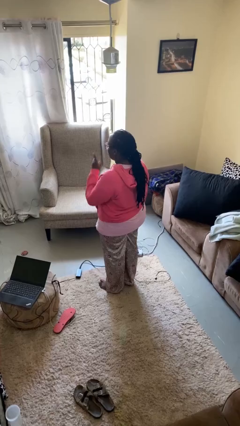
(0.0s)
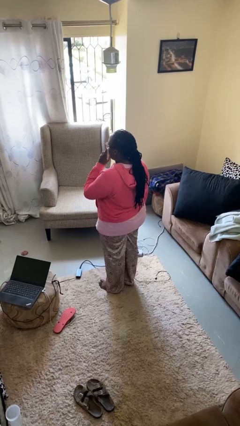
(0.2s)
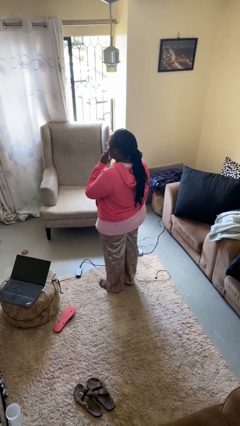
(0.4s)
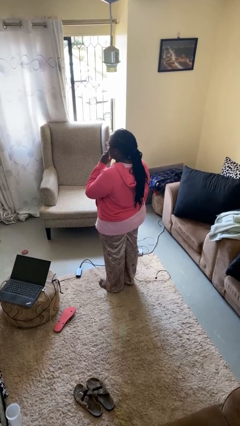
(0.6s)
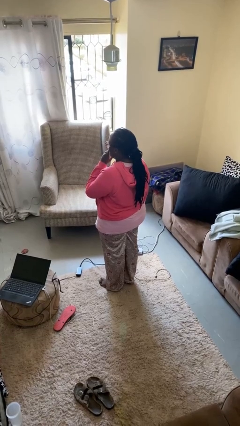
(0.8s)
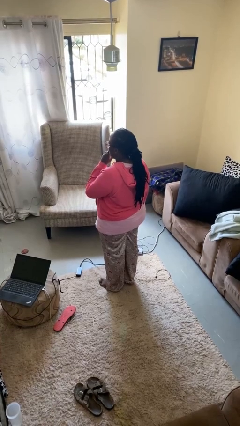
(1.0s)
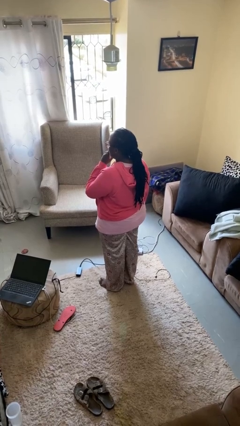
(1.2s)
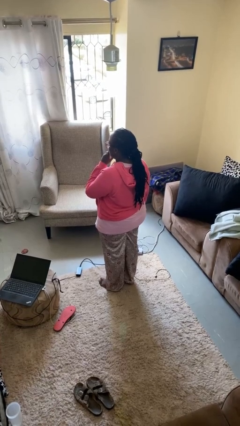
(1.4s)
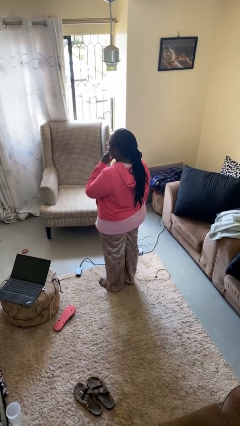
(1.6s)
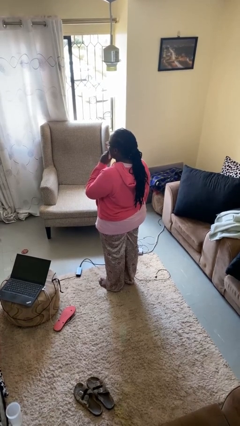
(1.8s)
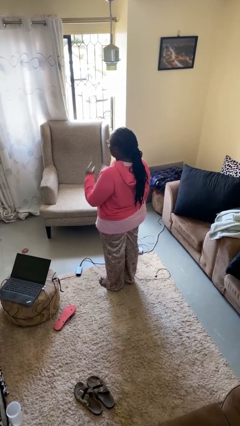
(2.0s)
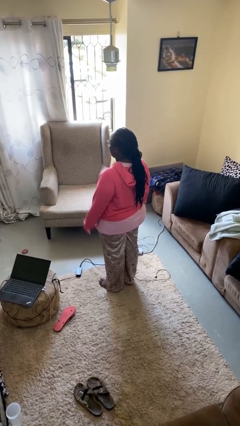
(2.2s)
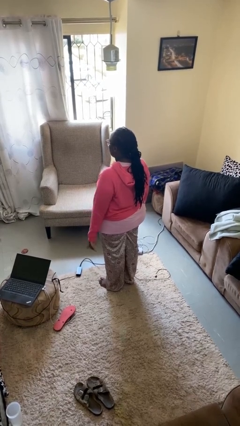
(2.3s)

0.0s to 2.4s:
person gestures be quiet

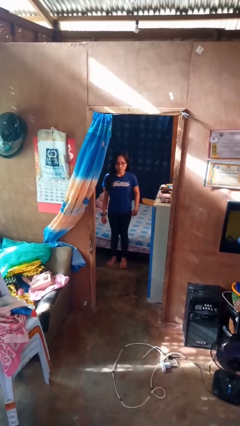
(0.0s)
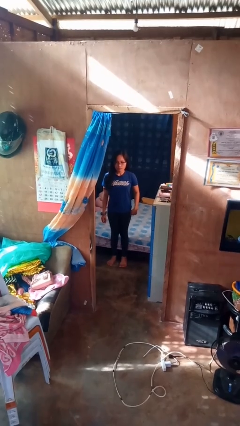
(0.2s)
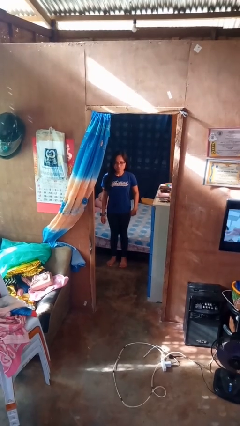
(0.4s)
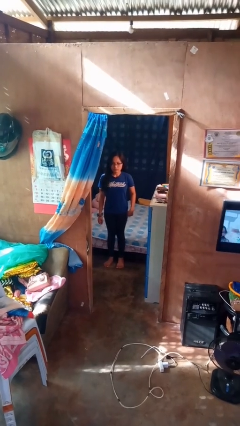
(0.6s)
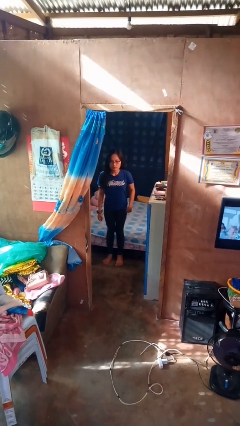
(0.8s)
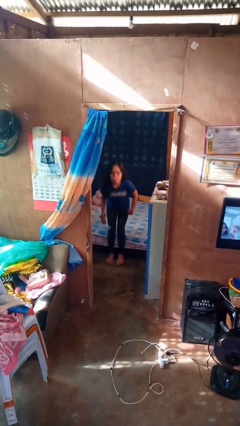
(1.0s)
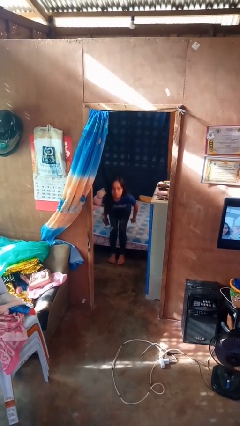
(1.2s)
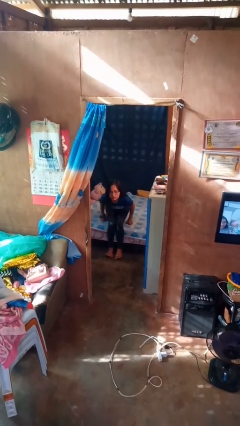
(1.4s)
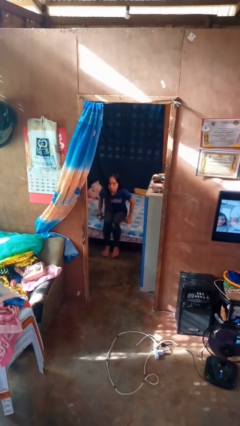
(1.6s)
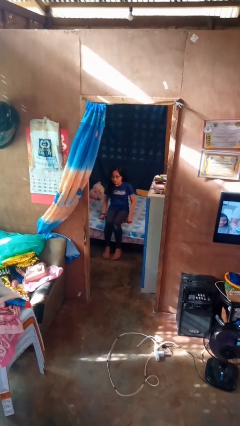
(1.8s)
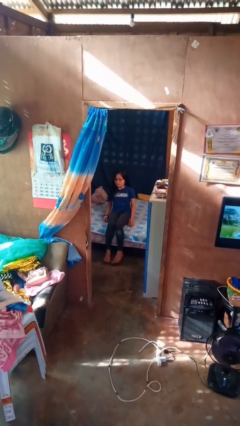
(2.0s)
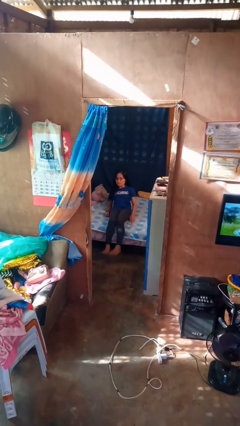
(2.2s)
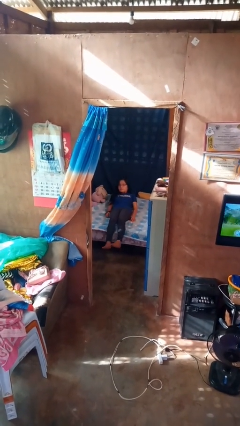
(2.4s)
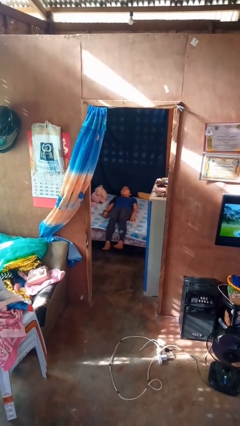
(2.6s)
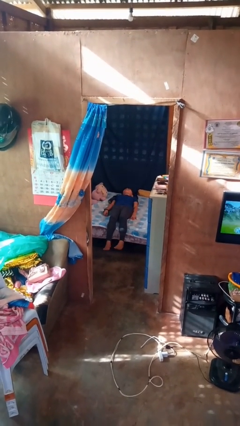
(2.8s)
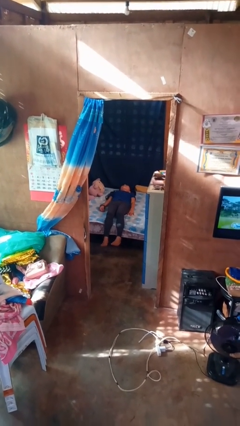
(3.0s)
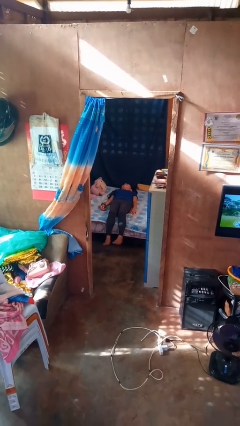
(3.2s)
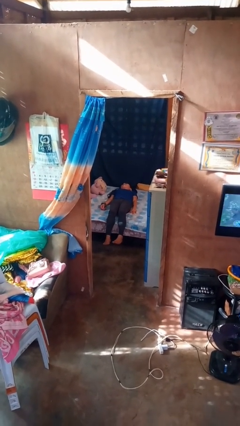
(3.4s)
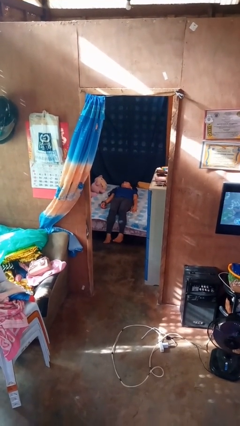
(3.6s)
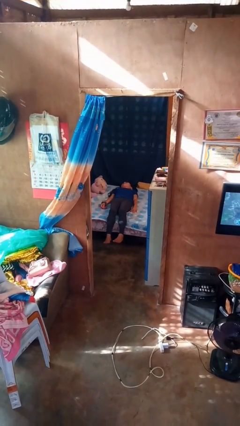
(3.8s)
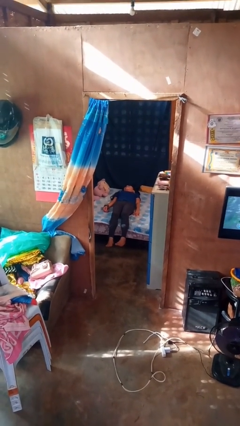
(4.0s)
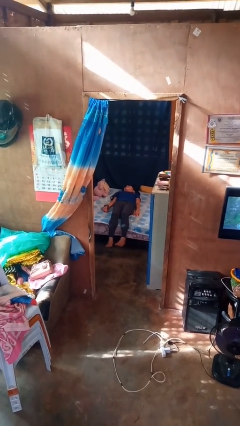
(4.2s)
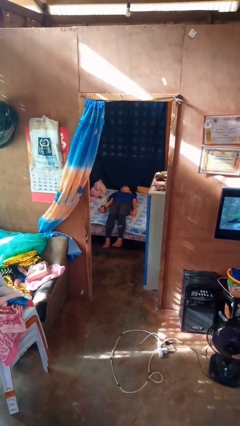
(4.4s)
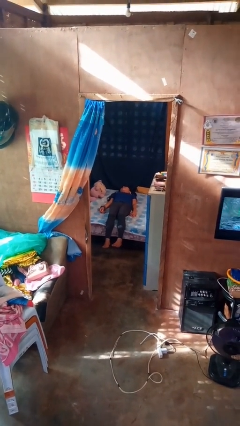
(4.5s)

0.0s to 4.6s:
person lies down on bed

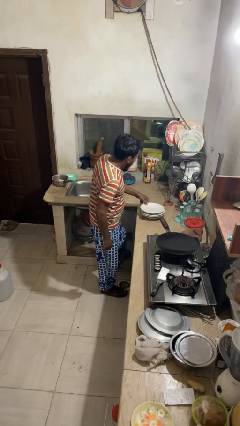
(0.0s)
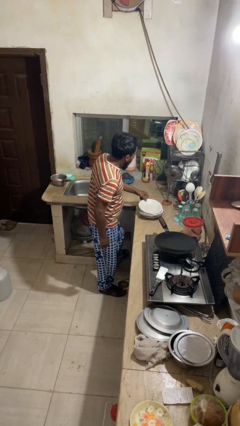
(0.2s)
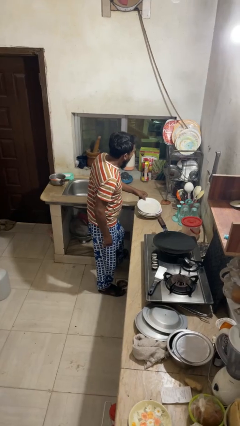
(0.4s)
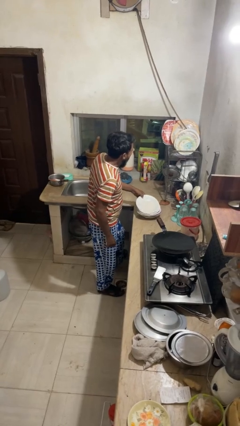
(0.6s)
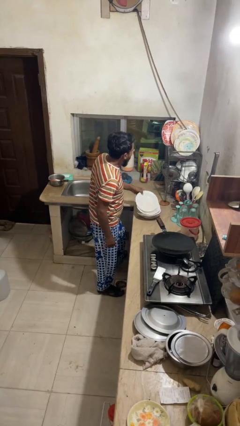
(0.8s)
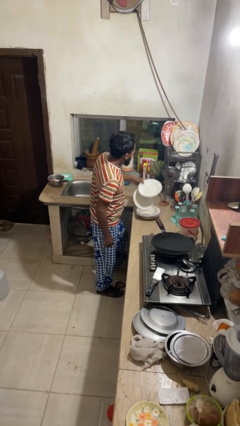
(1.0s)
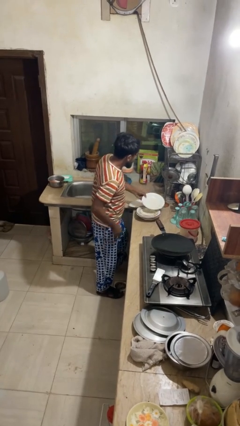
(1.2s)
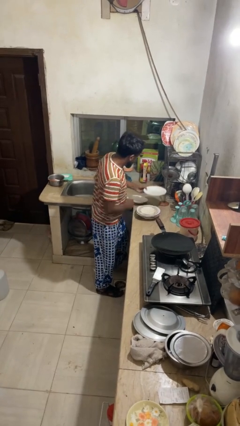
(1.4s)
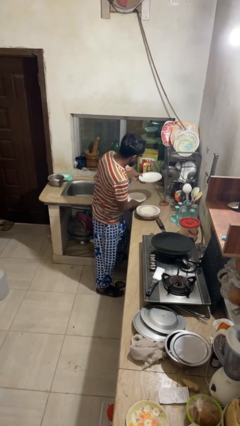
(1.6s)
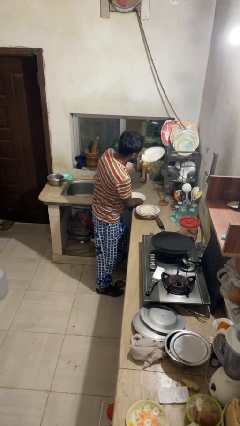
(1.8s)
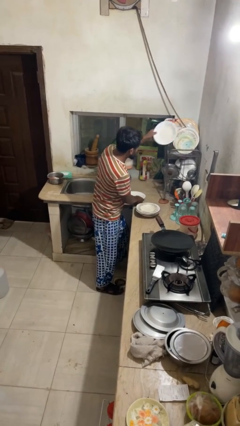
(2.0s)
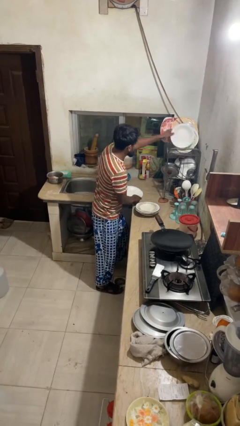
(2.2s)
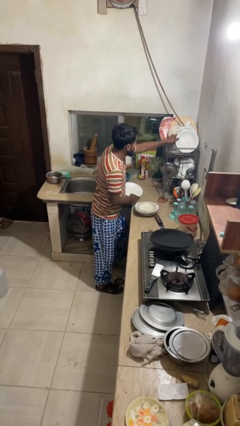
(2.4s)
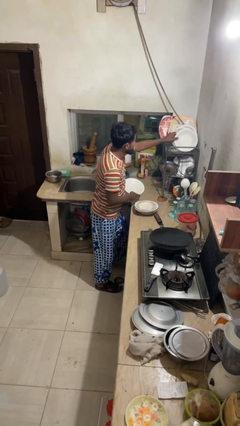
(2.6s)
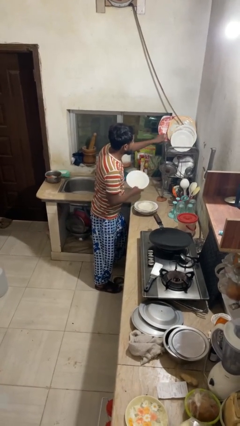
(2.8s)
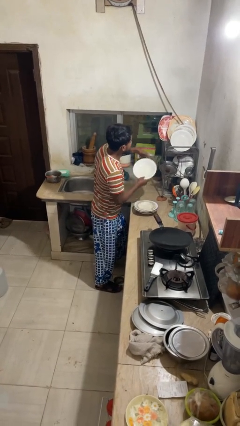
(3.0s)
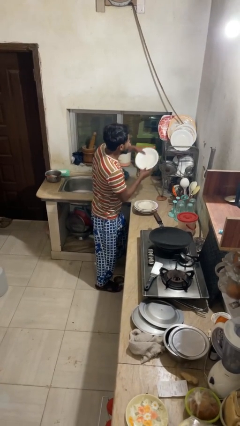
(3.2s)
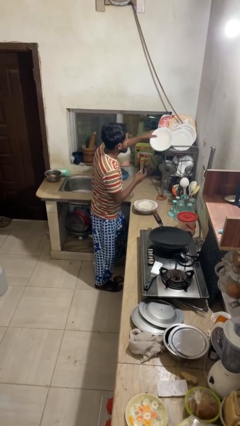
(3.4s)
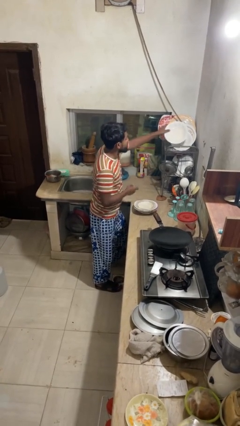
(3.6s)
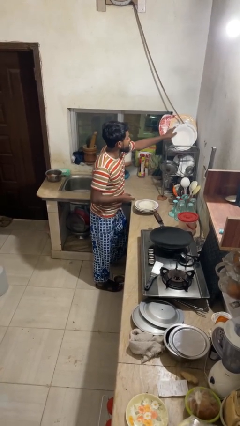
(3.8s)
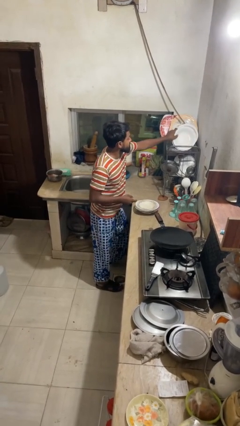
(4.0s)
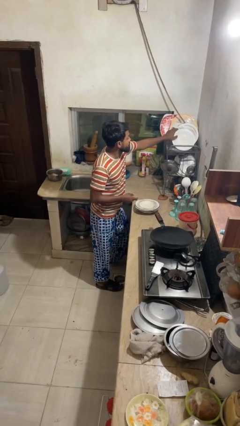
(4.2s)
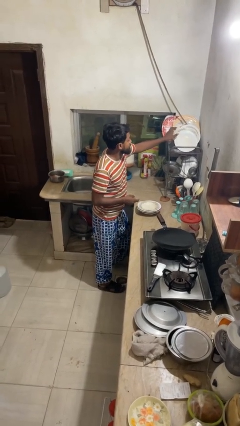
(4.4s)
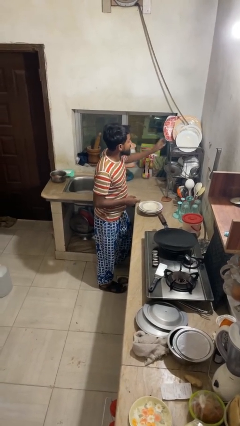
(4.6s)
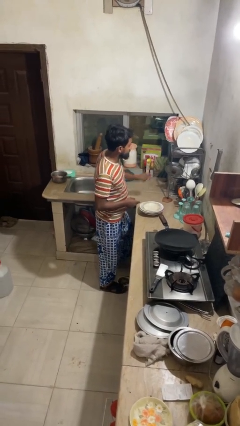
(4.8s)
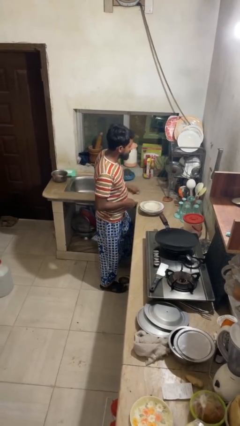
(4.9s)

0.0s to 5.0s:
person loads dishwasher

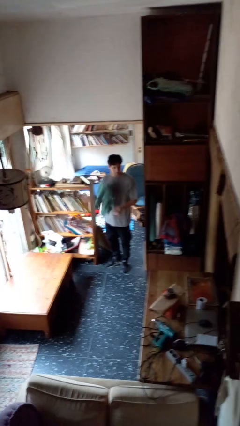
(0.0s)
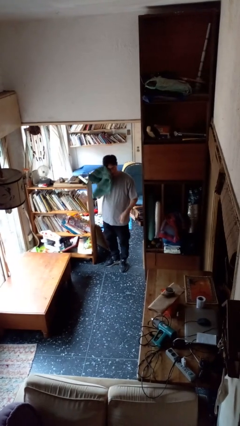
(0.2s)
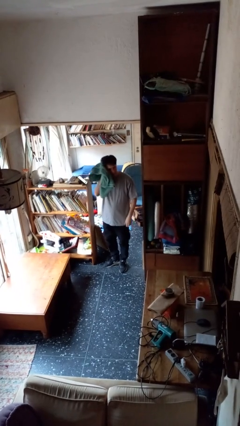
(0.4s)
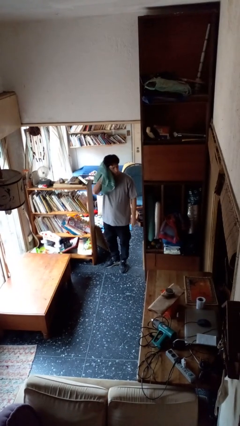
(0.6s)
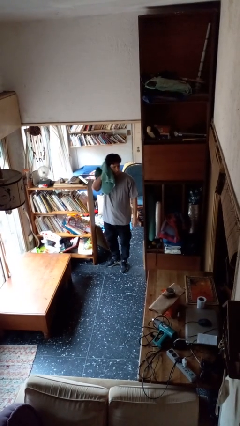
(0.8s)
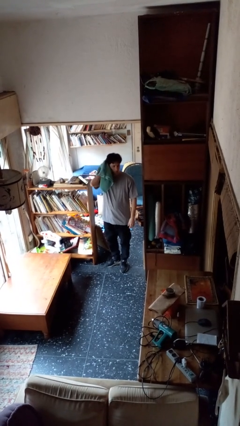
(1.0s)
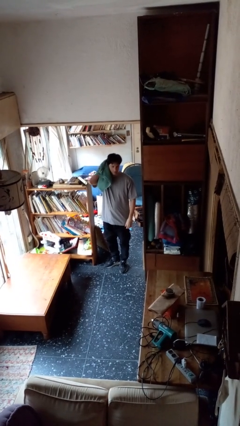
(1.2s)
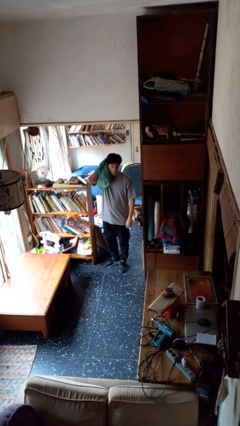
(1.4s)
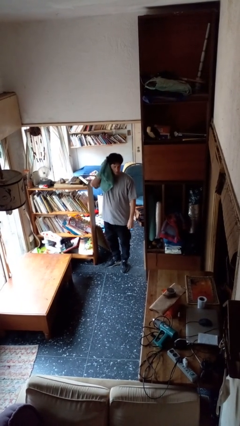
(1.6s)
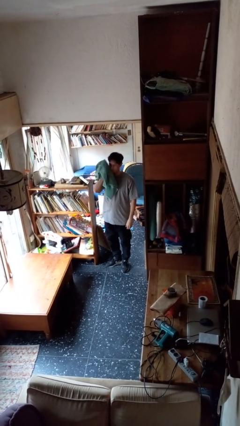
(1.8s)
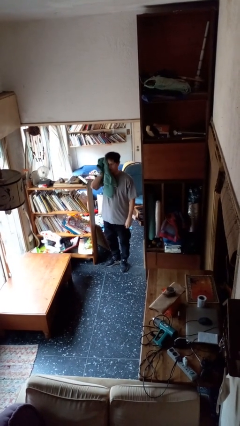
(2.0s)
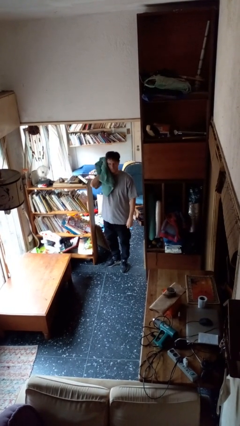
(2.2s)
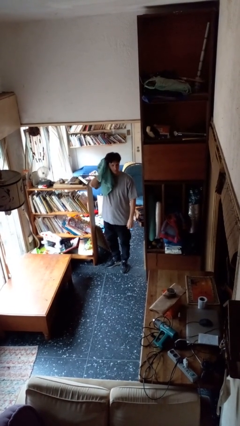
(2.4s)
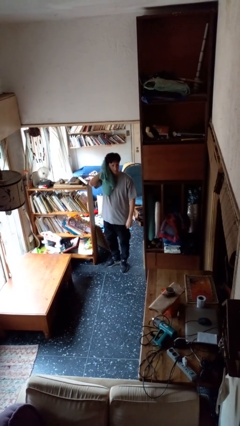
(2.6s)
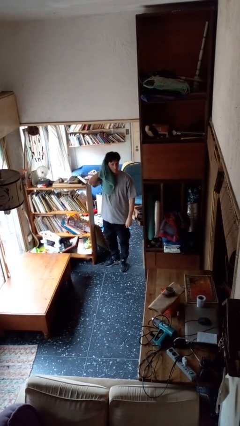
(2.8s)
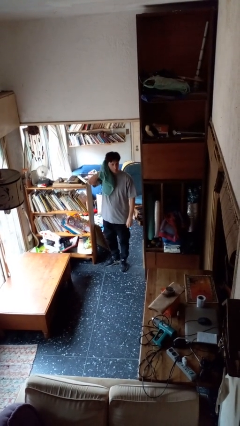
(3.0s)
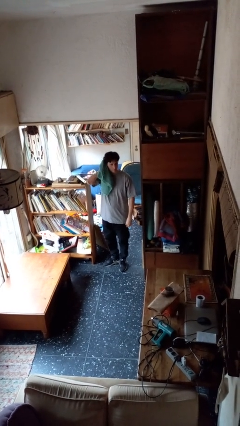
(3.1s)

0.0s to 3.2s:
person dries hair with towel

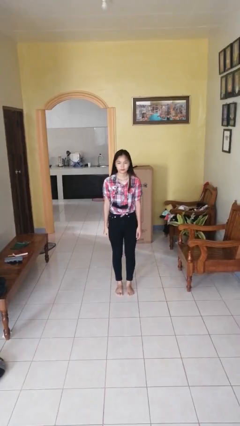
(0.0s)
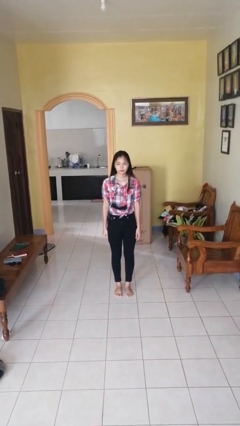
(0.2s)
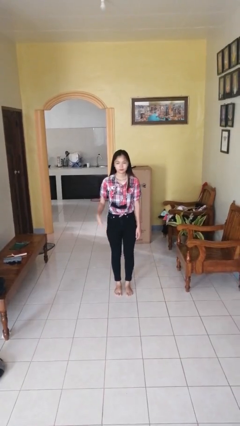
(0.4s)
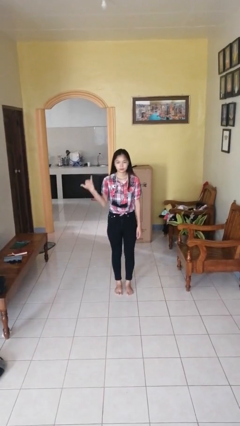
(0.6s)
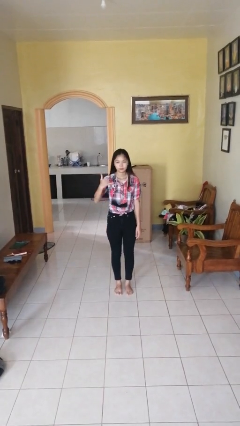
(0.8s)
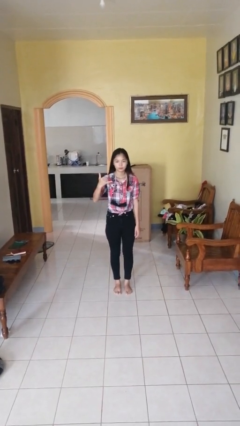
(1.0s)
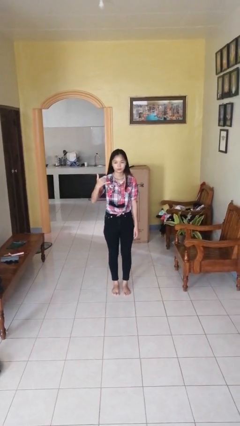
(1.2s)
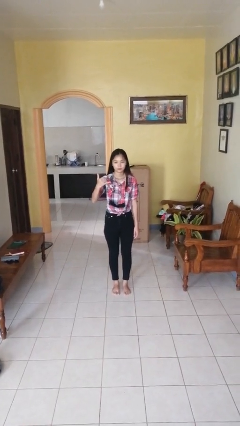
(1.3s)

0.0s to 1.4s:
person gestures hang loose

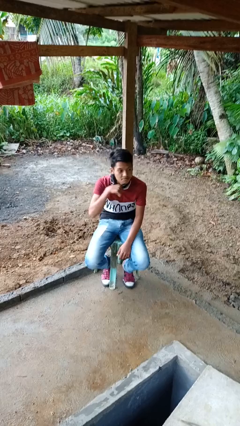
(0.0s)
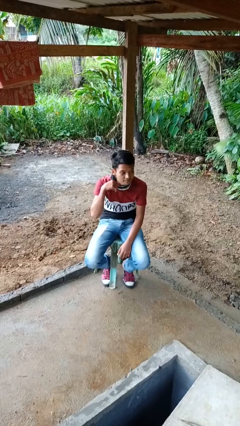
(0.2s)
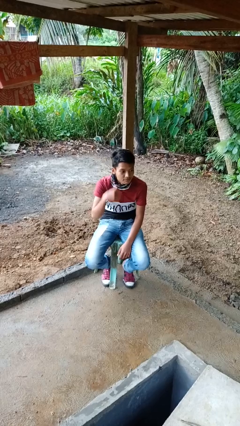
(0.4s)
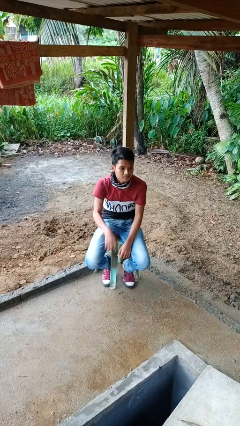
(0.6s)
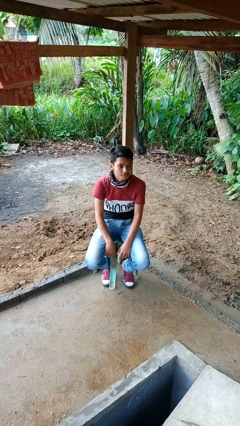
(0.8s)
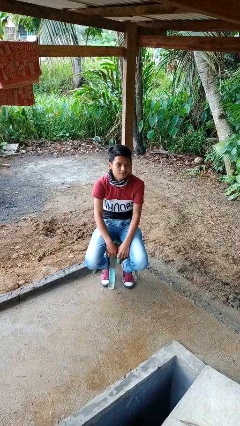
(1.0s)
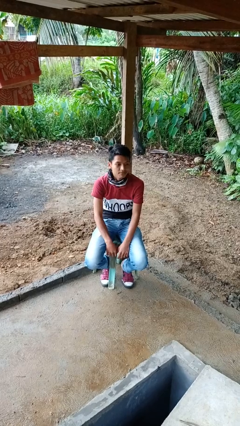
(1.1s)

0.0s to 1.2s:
person gestures cut
